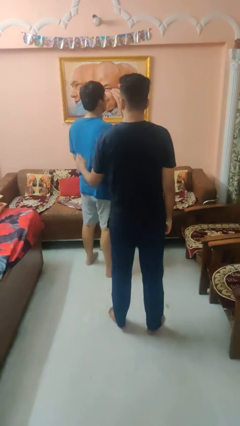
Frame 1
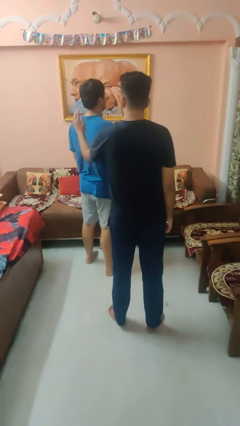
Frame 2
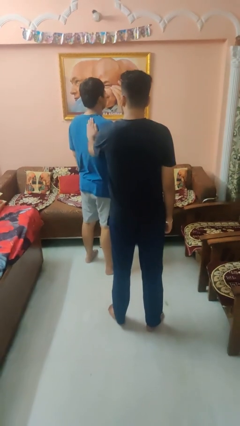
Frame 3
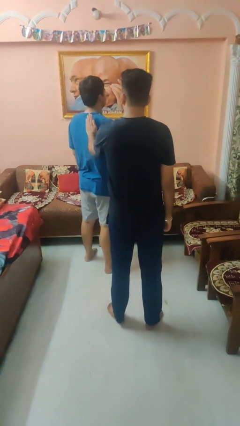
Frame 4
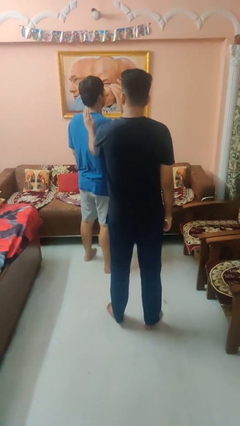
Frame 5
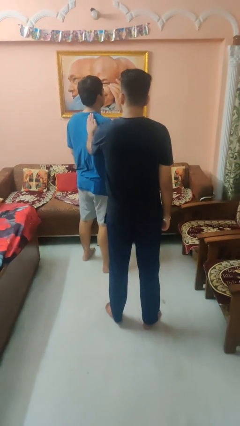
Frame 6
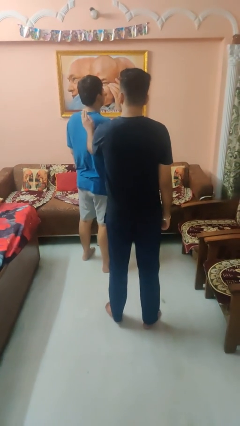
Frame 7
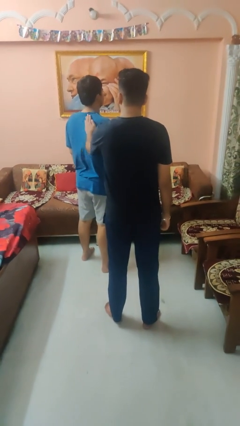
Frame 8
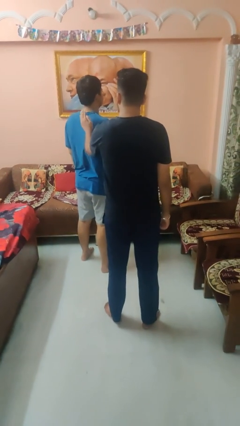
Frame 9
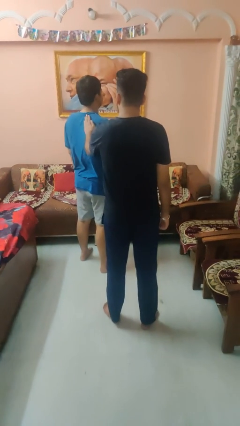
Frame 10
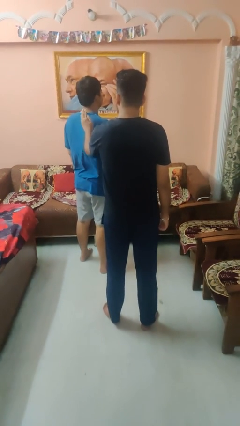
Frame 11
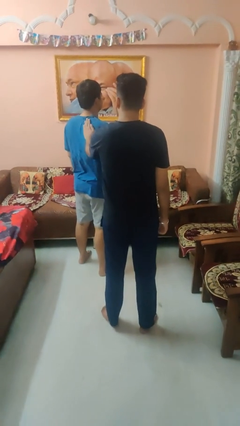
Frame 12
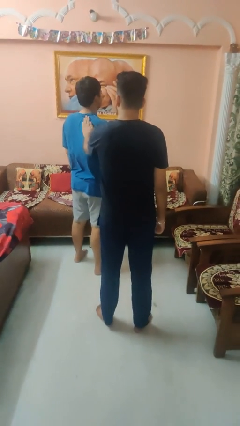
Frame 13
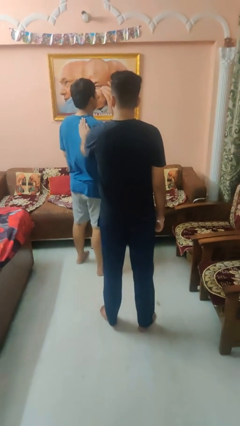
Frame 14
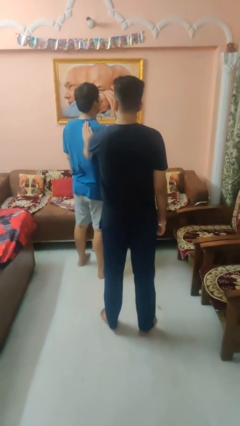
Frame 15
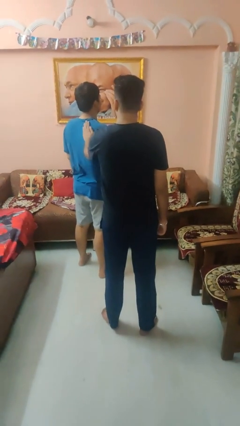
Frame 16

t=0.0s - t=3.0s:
person touches back of person

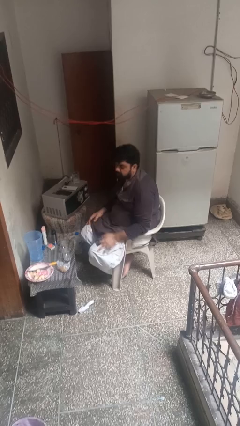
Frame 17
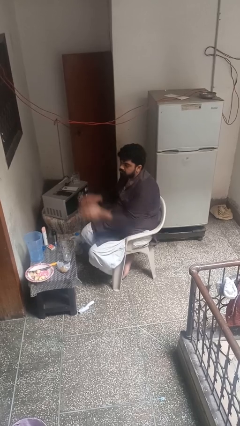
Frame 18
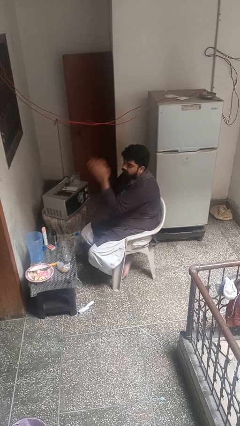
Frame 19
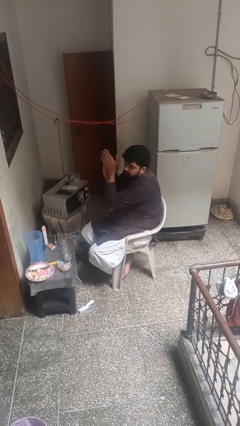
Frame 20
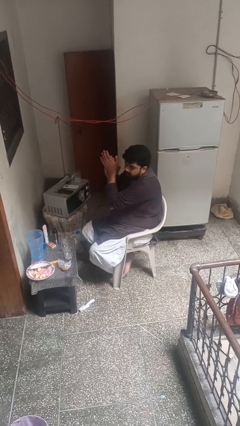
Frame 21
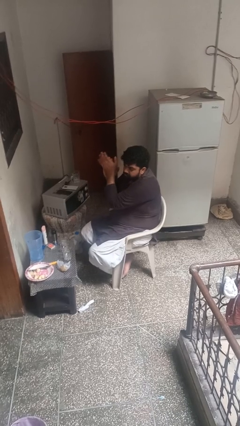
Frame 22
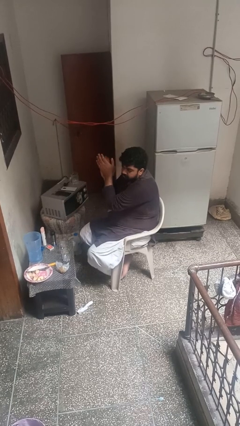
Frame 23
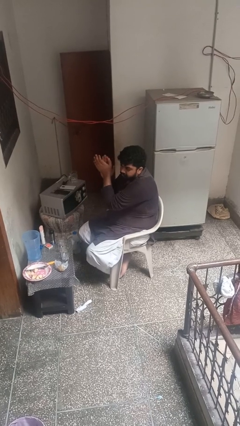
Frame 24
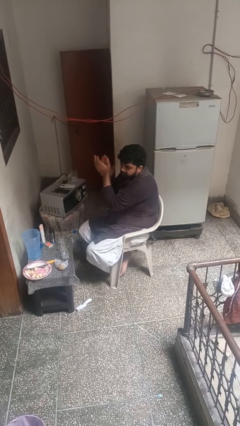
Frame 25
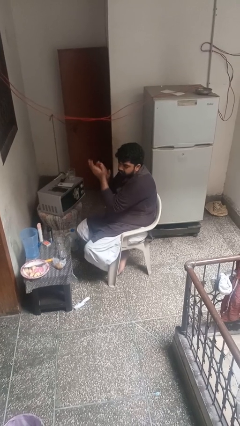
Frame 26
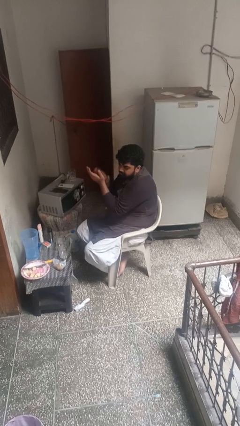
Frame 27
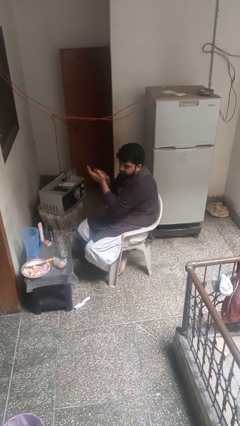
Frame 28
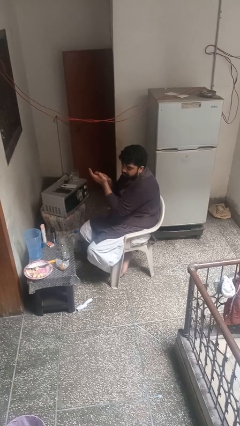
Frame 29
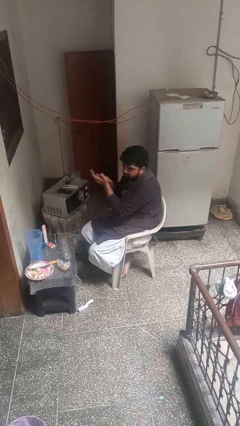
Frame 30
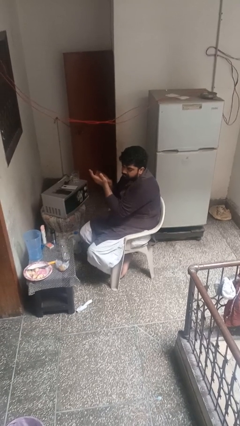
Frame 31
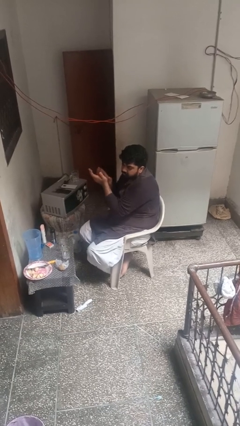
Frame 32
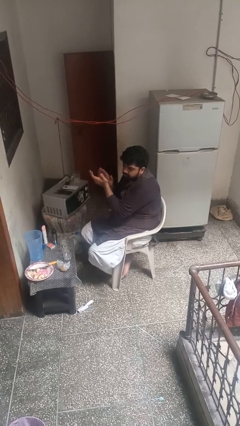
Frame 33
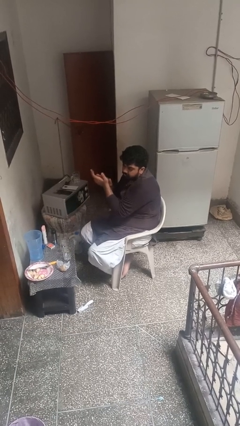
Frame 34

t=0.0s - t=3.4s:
person claps hands

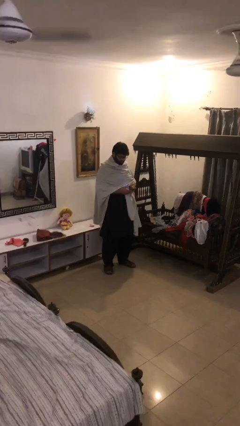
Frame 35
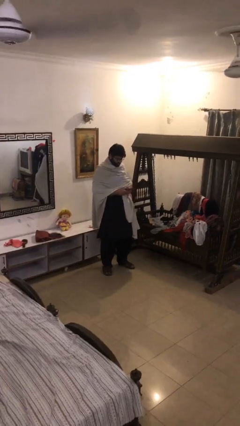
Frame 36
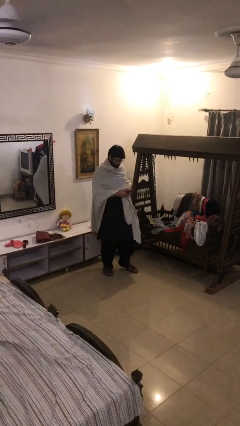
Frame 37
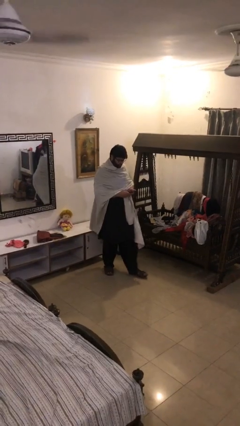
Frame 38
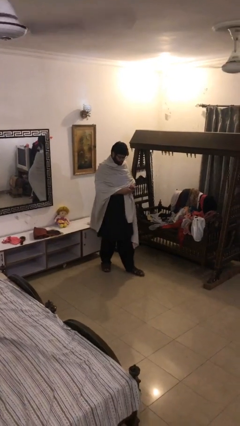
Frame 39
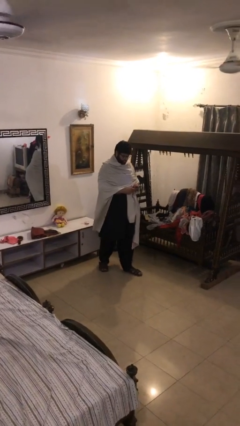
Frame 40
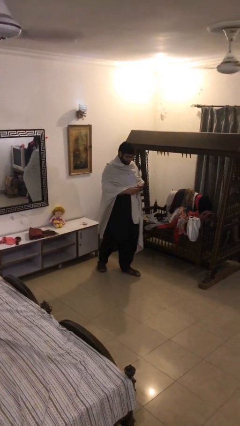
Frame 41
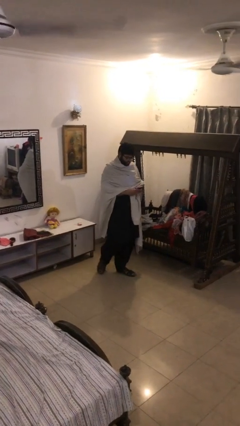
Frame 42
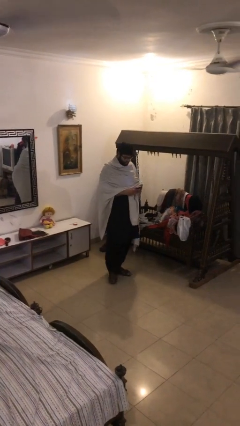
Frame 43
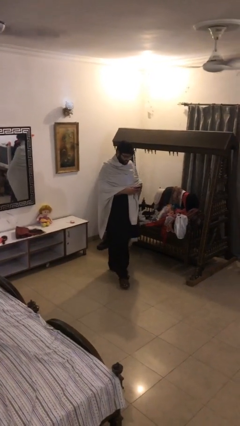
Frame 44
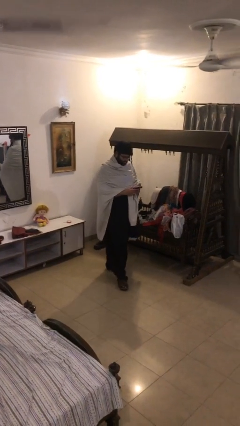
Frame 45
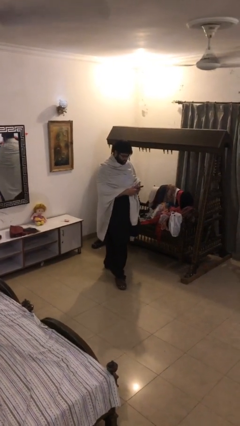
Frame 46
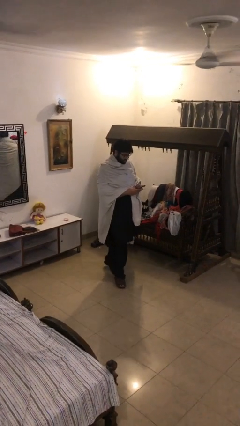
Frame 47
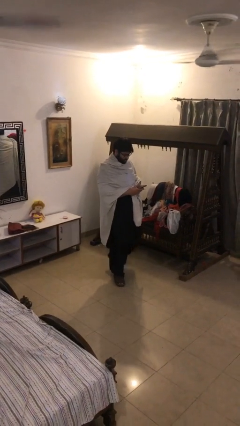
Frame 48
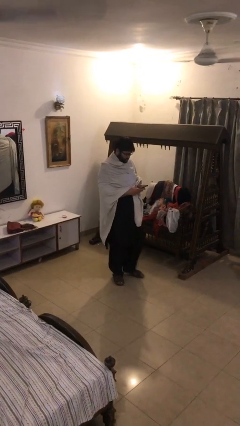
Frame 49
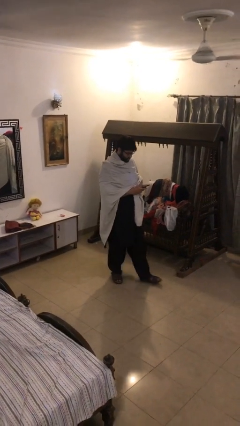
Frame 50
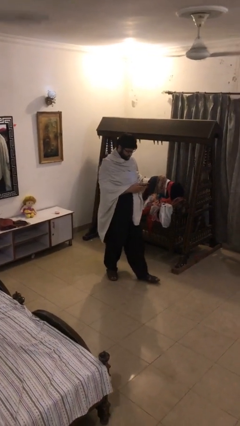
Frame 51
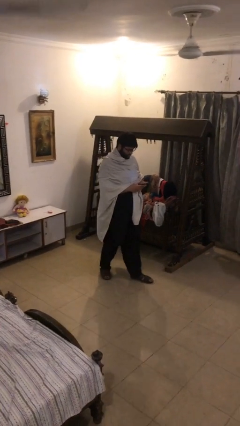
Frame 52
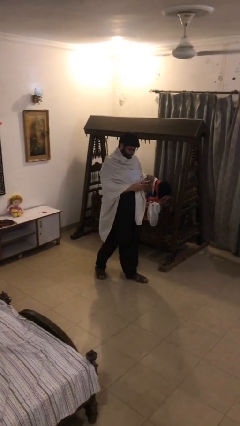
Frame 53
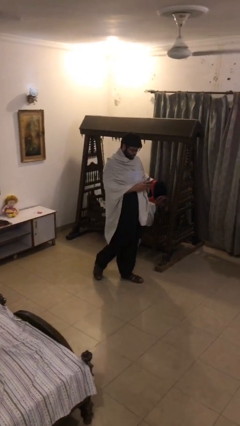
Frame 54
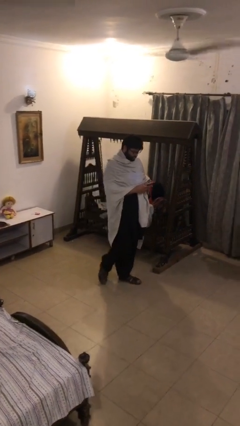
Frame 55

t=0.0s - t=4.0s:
person texts on phone

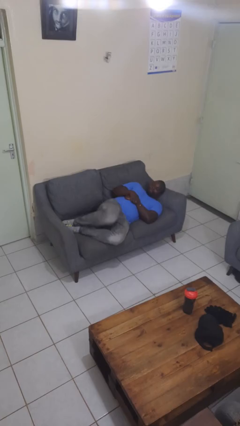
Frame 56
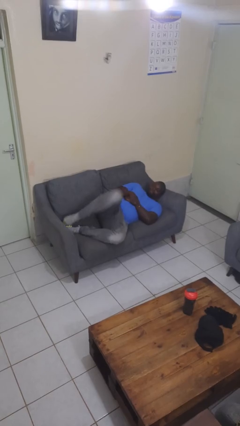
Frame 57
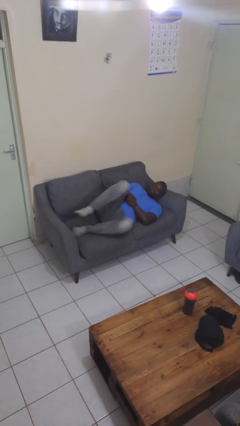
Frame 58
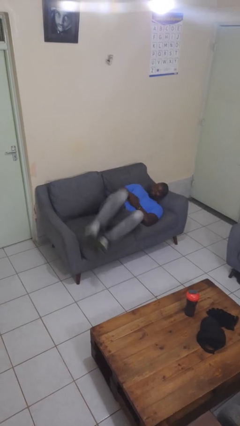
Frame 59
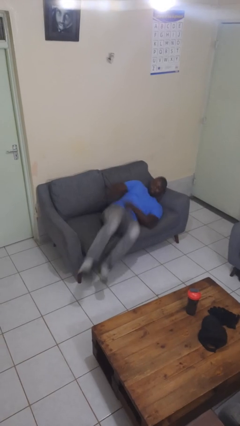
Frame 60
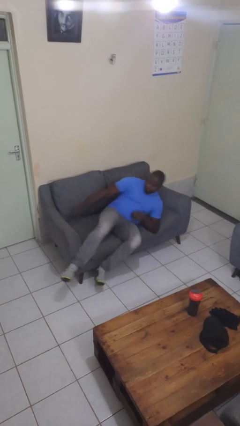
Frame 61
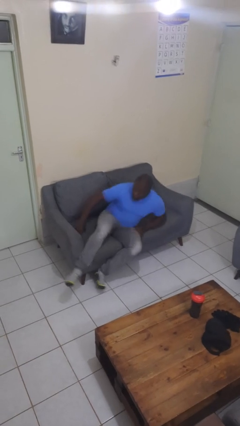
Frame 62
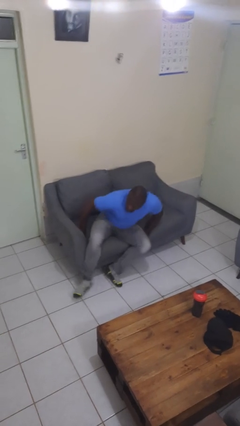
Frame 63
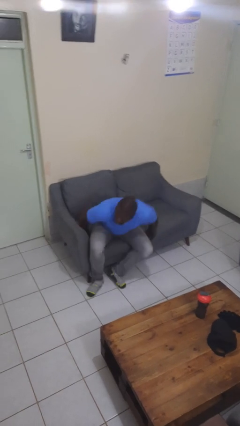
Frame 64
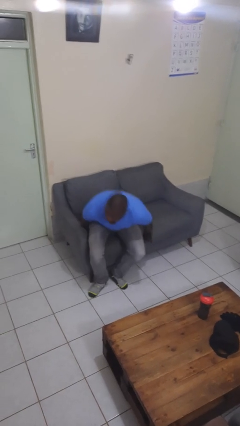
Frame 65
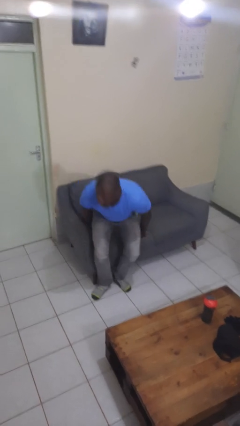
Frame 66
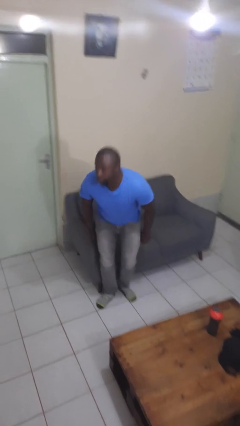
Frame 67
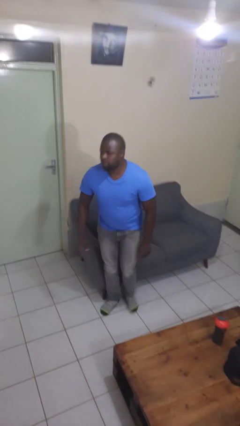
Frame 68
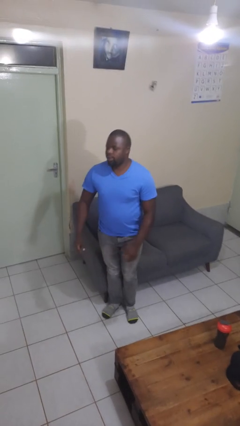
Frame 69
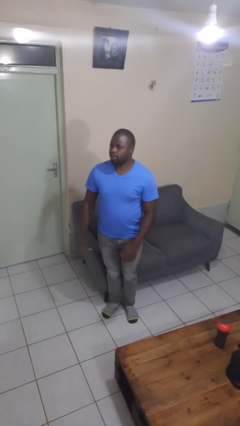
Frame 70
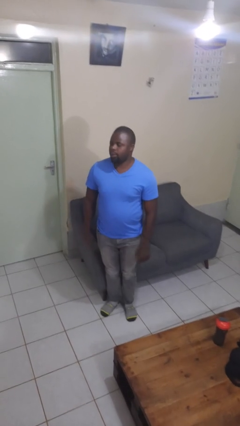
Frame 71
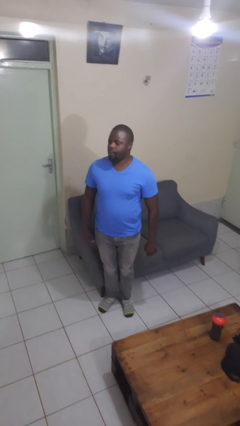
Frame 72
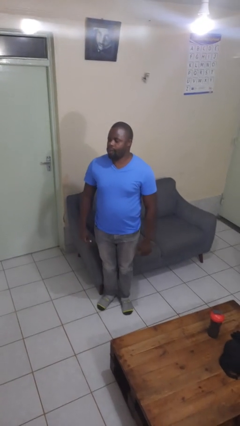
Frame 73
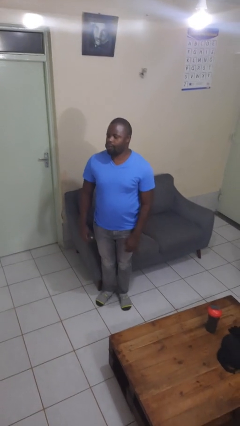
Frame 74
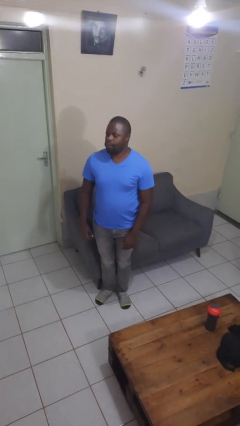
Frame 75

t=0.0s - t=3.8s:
person stands up

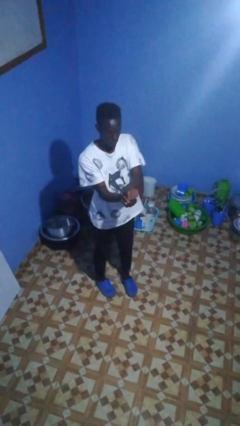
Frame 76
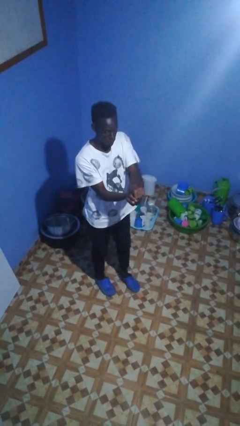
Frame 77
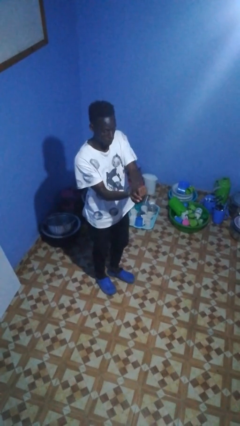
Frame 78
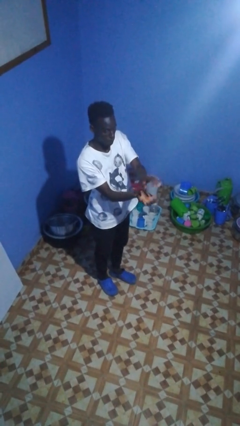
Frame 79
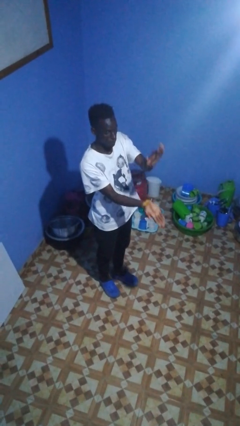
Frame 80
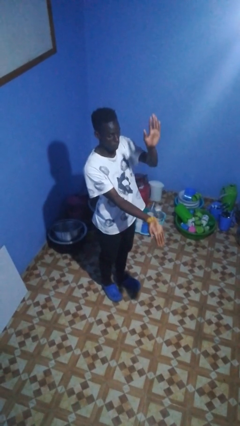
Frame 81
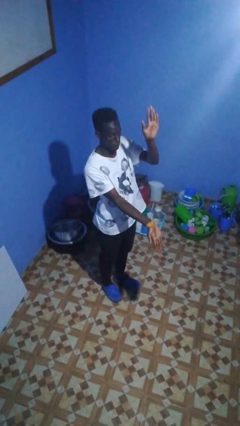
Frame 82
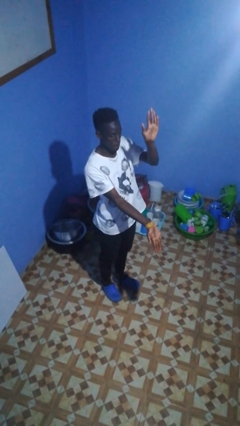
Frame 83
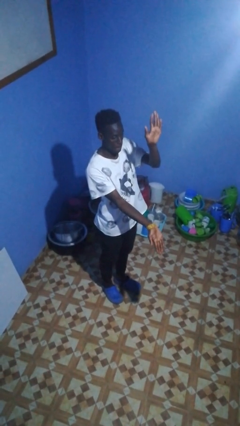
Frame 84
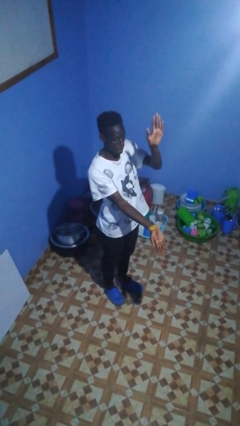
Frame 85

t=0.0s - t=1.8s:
person gestures zoom in

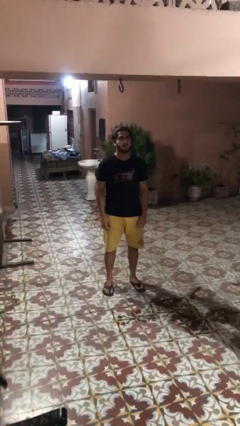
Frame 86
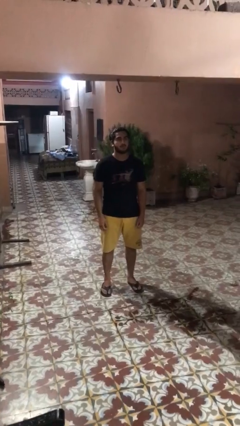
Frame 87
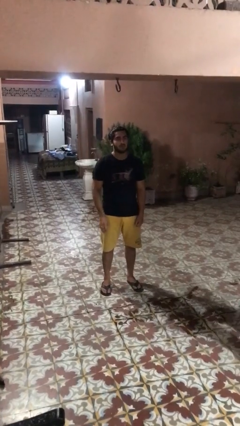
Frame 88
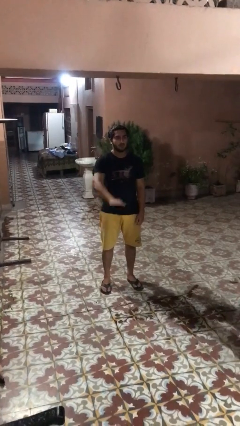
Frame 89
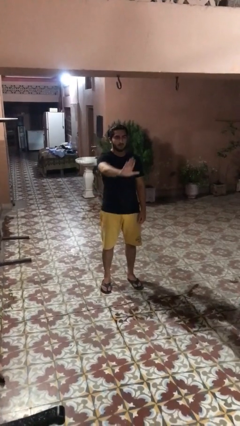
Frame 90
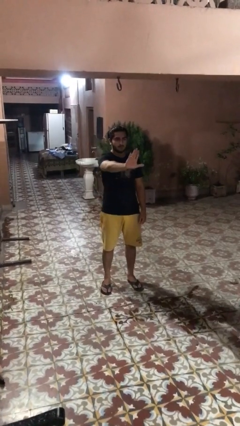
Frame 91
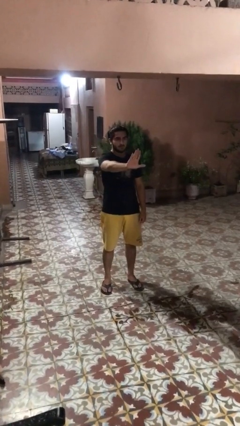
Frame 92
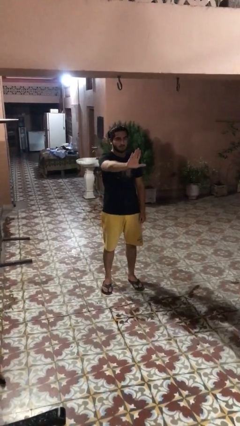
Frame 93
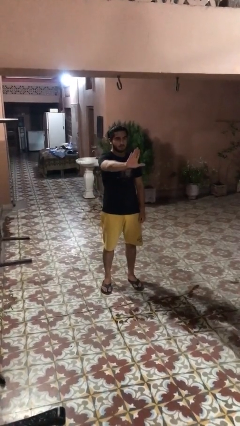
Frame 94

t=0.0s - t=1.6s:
person gestures stop
